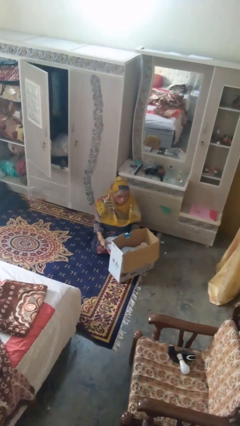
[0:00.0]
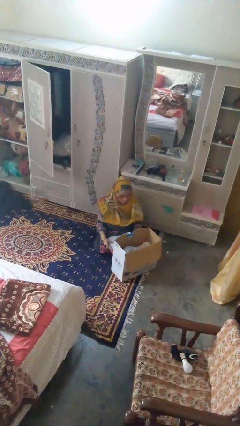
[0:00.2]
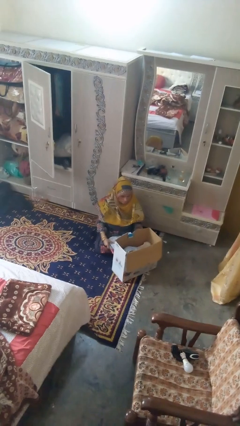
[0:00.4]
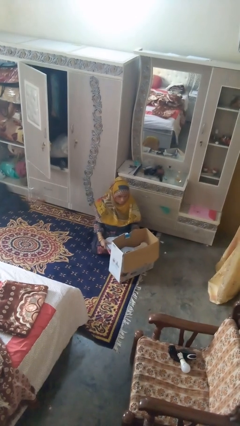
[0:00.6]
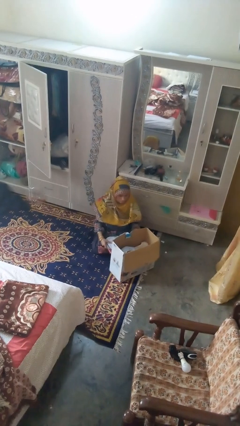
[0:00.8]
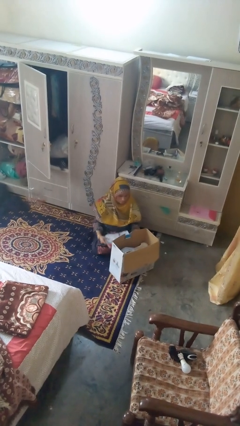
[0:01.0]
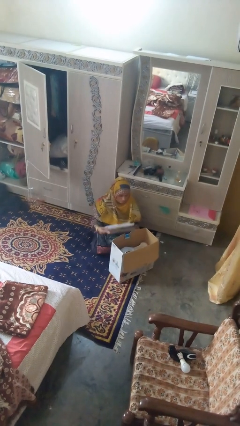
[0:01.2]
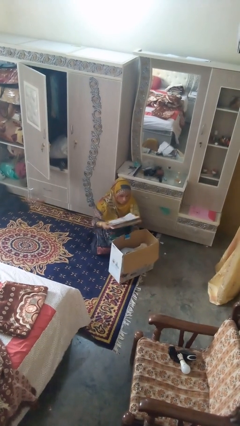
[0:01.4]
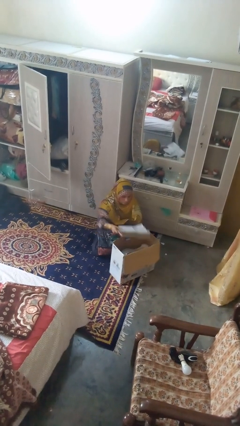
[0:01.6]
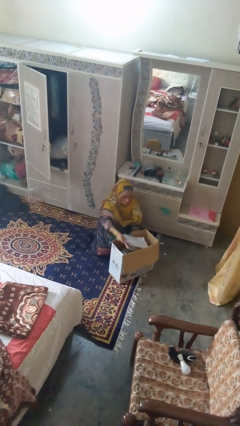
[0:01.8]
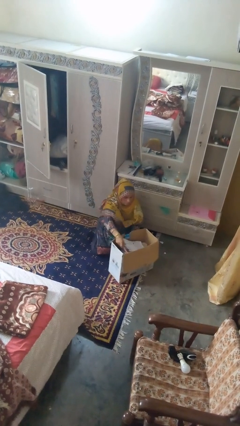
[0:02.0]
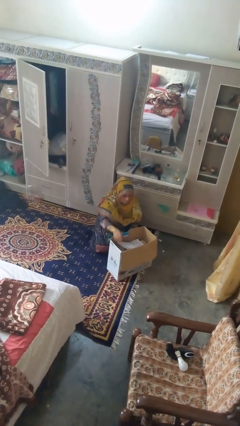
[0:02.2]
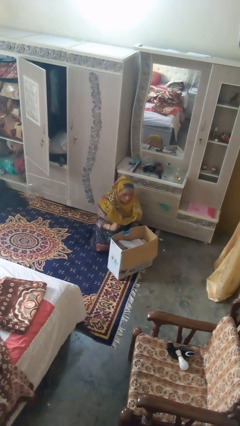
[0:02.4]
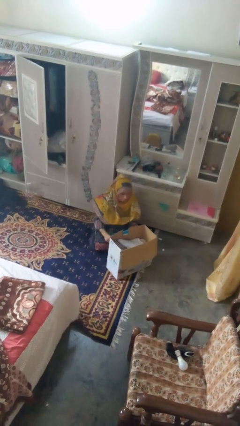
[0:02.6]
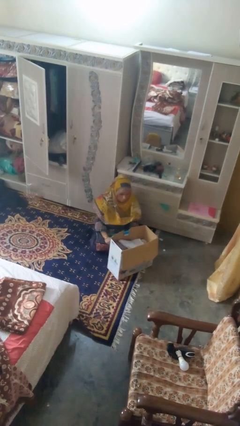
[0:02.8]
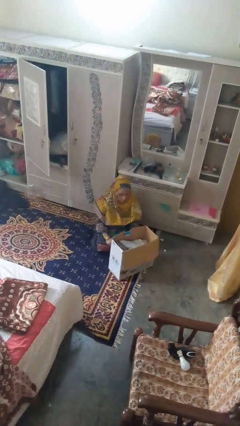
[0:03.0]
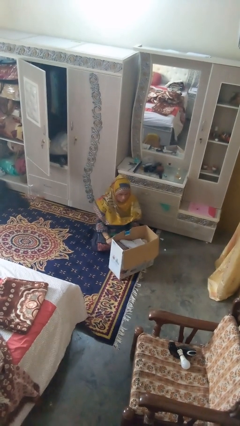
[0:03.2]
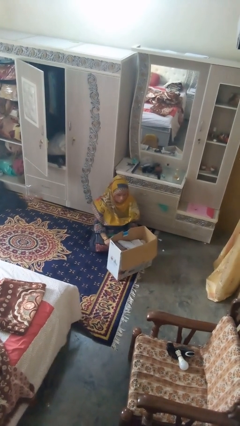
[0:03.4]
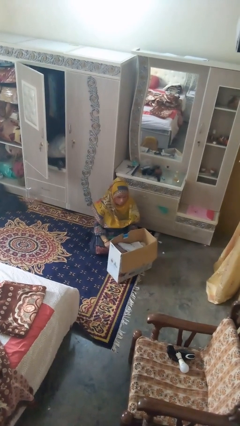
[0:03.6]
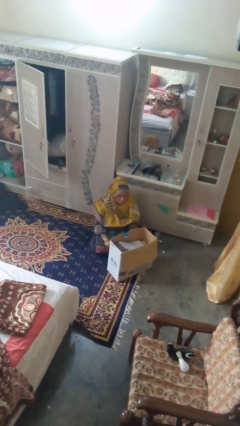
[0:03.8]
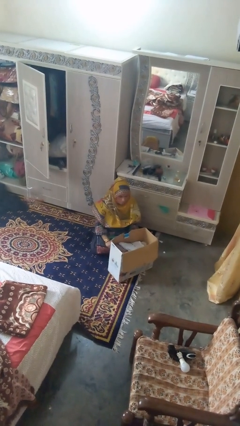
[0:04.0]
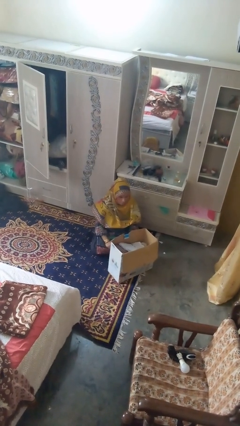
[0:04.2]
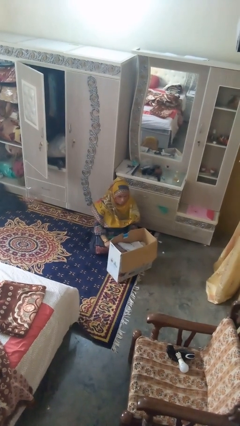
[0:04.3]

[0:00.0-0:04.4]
person puts object into box

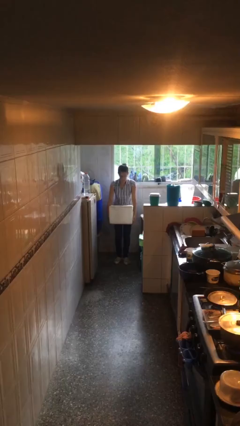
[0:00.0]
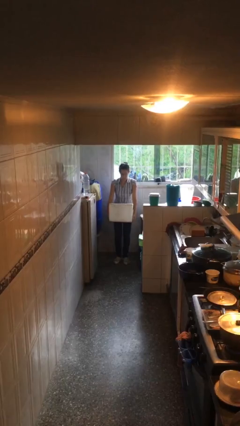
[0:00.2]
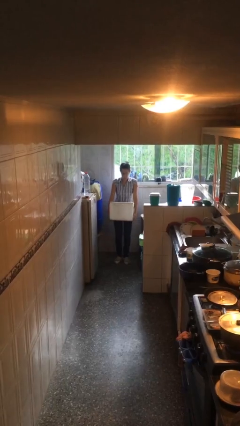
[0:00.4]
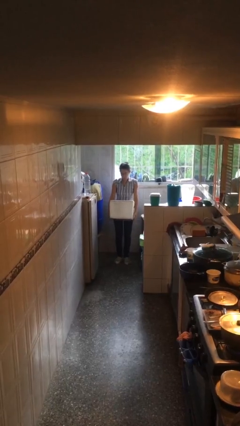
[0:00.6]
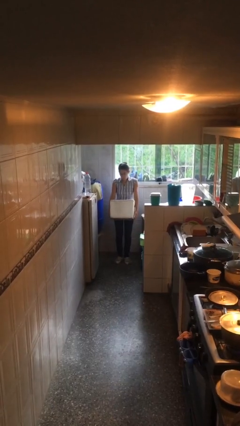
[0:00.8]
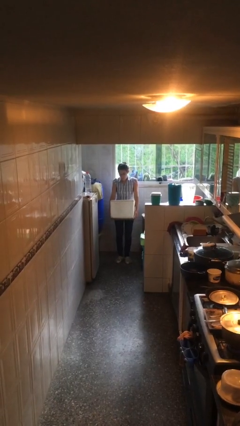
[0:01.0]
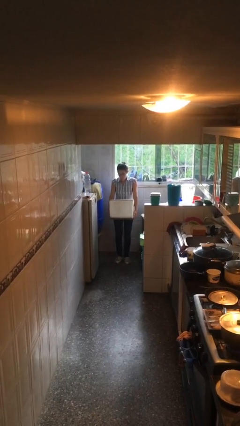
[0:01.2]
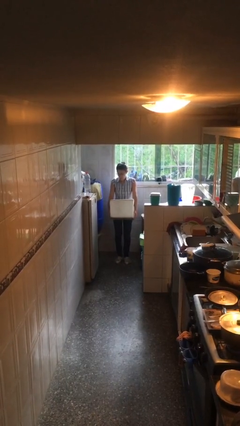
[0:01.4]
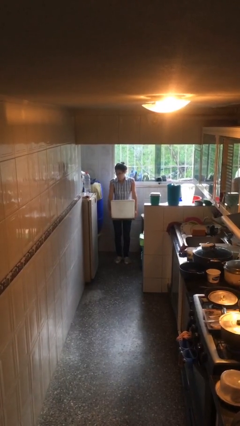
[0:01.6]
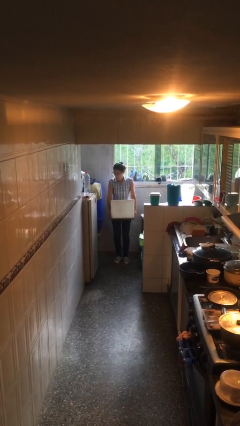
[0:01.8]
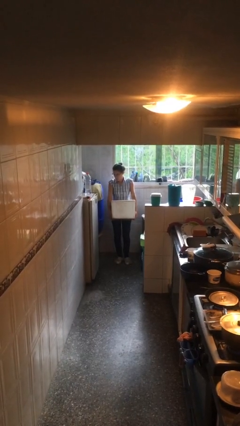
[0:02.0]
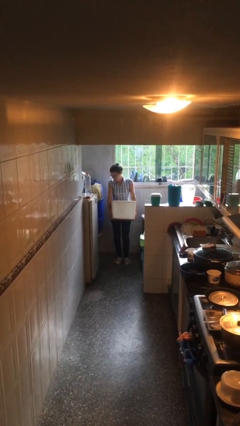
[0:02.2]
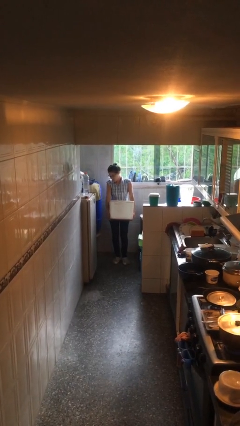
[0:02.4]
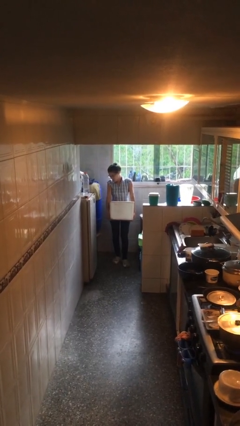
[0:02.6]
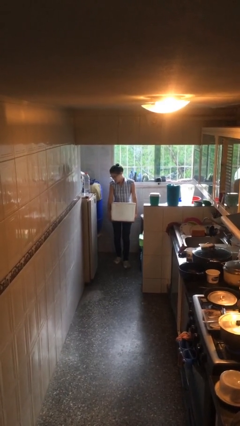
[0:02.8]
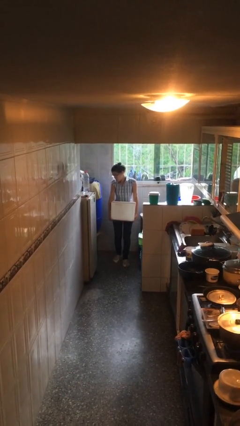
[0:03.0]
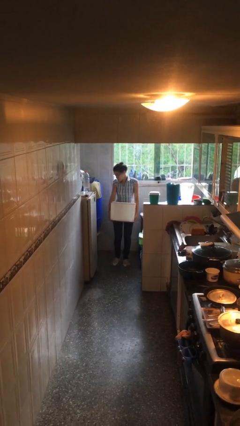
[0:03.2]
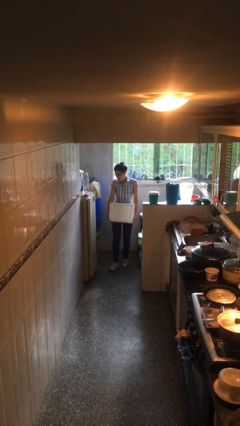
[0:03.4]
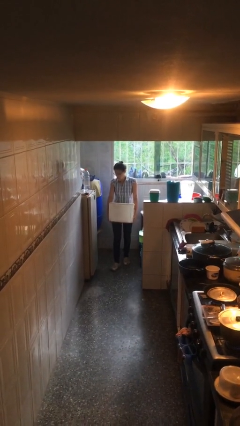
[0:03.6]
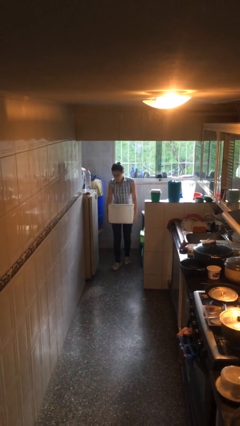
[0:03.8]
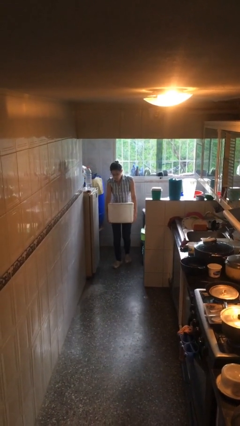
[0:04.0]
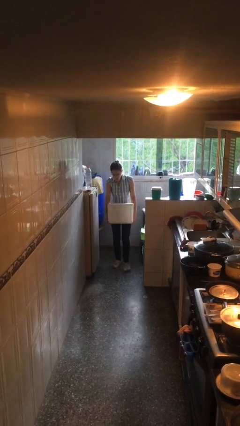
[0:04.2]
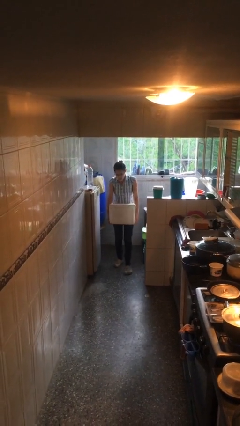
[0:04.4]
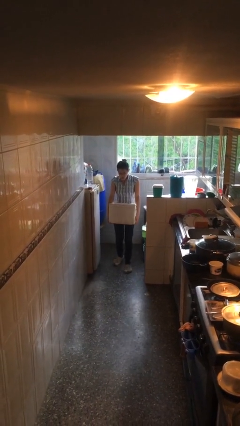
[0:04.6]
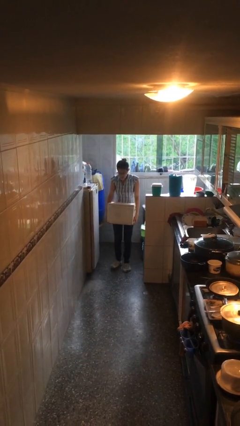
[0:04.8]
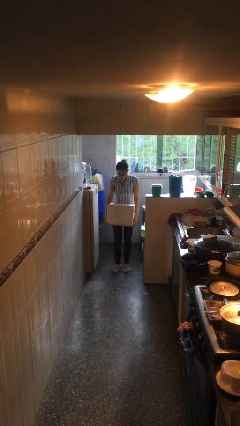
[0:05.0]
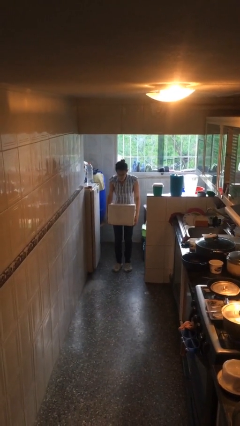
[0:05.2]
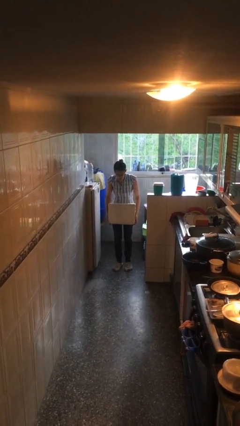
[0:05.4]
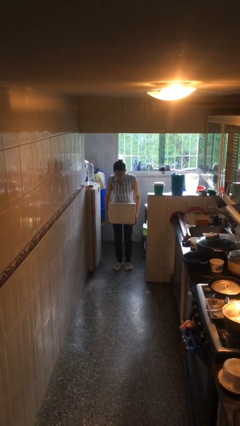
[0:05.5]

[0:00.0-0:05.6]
person carries heavy object

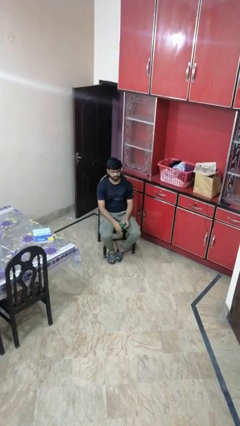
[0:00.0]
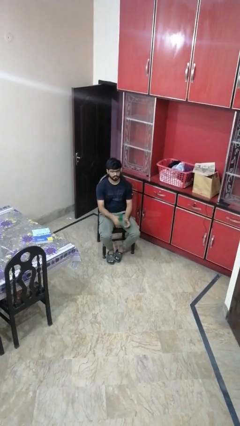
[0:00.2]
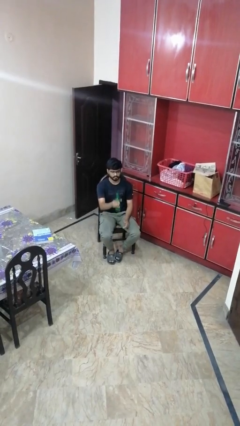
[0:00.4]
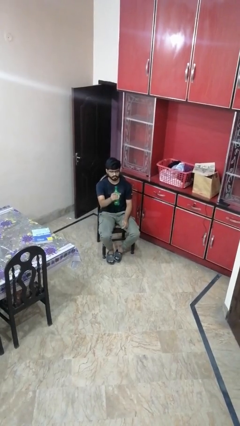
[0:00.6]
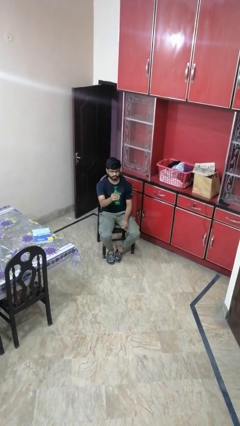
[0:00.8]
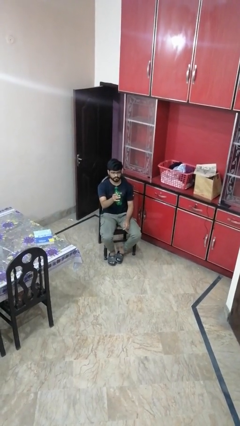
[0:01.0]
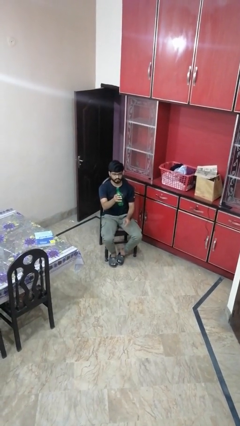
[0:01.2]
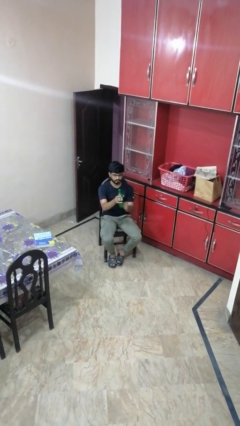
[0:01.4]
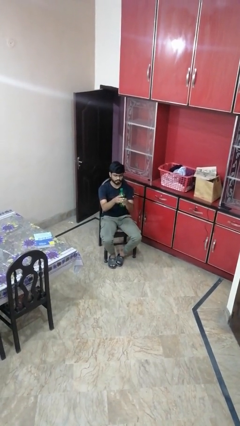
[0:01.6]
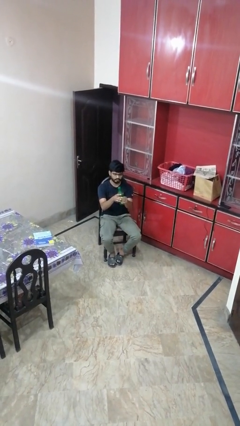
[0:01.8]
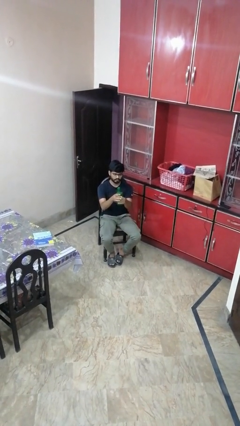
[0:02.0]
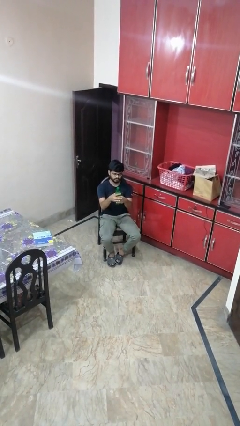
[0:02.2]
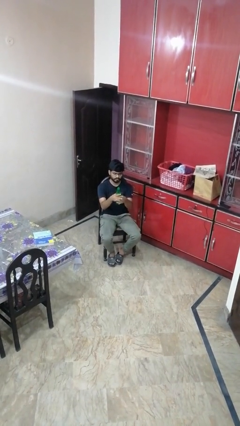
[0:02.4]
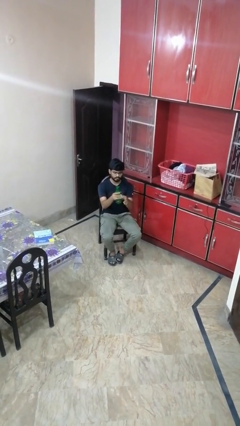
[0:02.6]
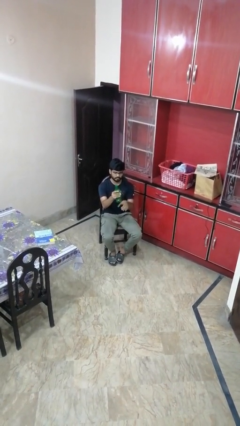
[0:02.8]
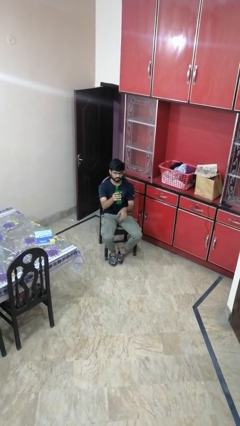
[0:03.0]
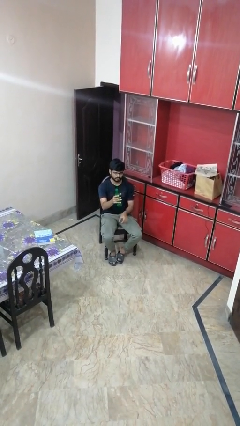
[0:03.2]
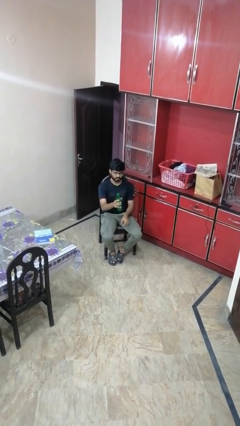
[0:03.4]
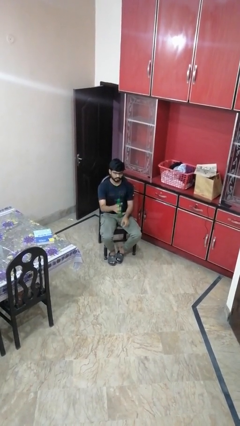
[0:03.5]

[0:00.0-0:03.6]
person squeezes object

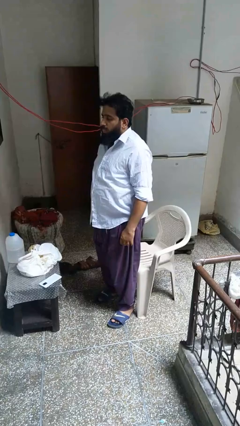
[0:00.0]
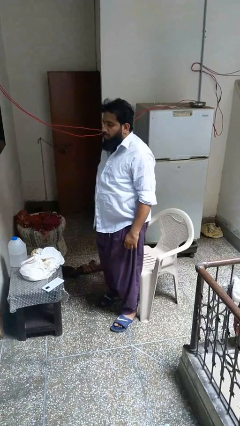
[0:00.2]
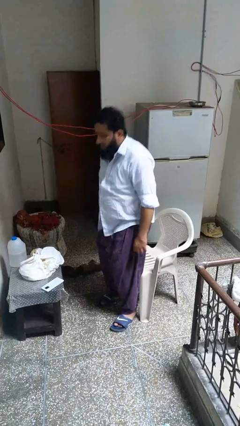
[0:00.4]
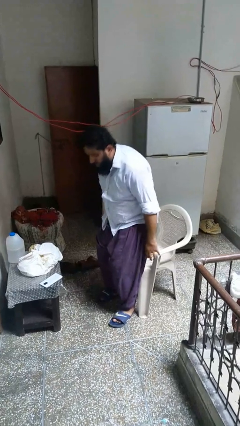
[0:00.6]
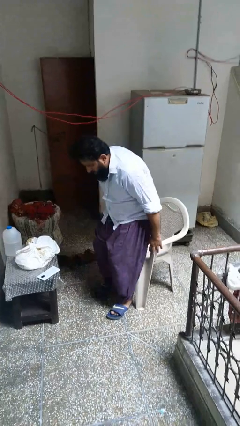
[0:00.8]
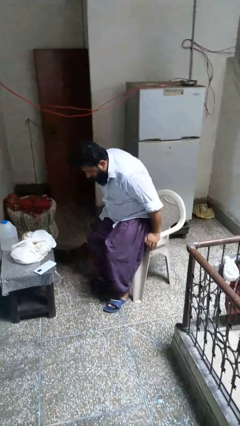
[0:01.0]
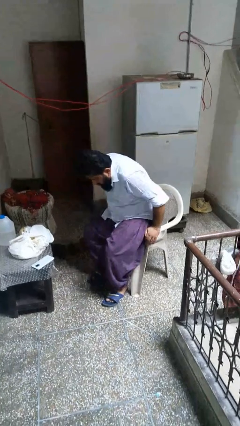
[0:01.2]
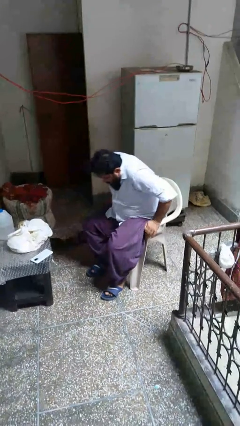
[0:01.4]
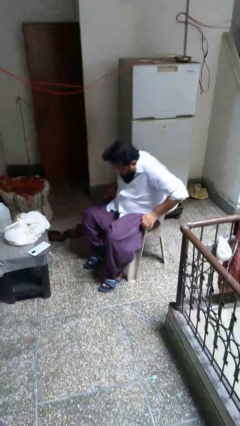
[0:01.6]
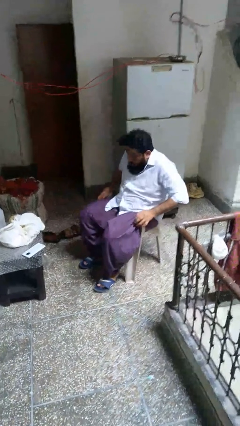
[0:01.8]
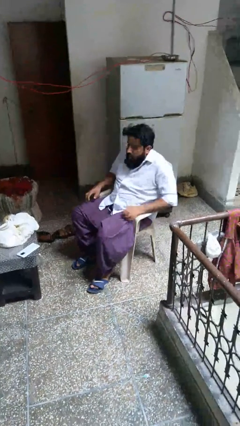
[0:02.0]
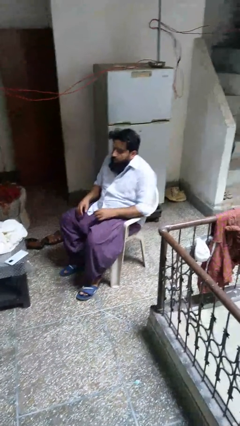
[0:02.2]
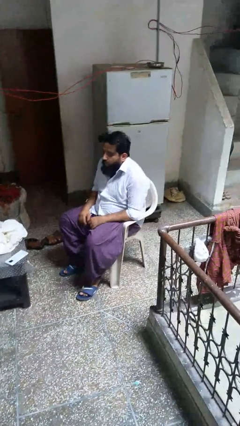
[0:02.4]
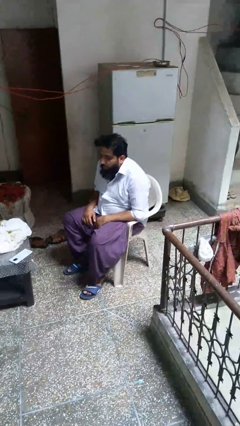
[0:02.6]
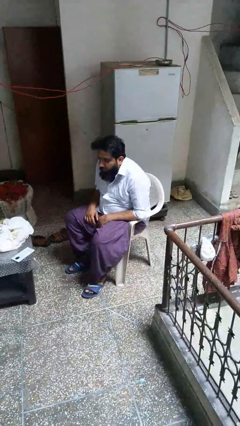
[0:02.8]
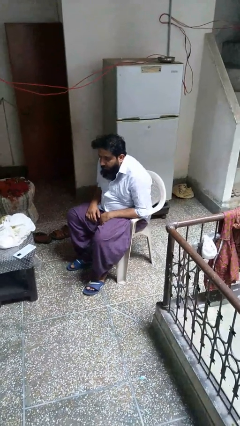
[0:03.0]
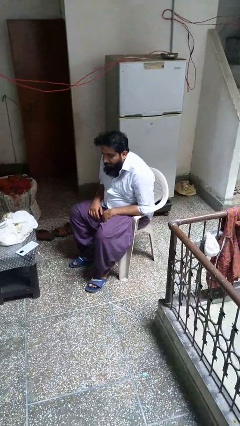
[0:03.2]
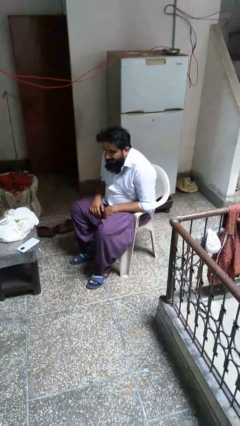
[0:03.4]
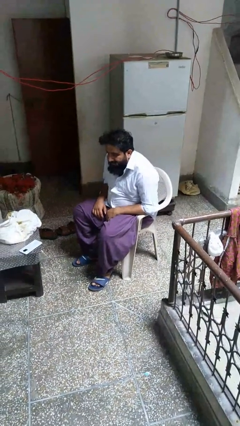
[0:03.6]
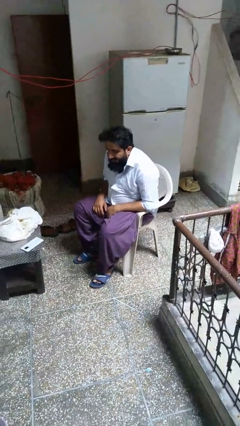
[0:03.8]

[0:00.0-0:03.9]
person sits down

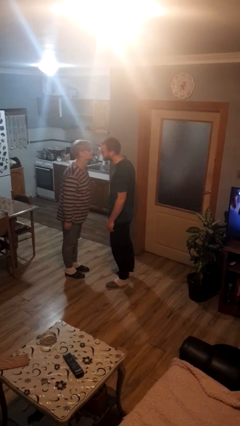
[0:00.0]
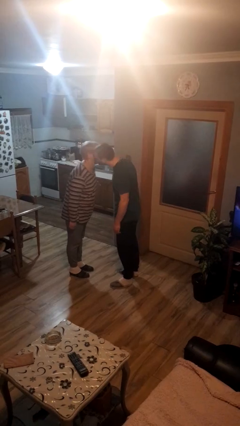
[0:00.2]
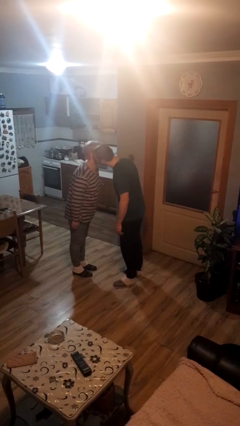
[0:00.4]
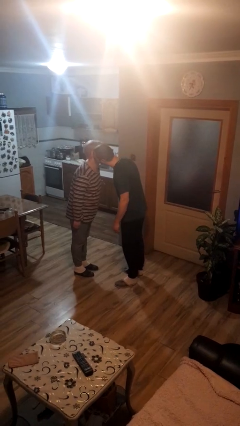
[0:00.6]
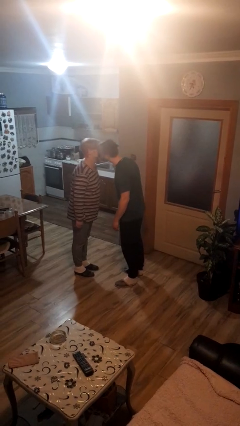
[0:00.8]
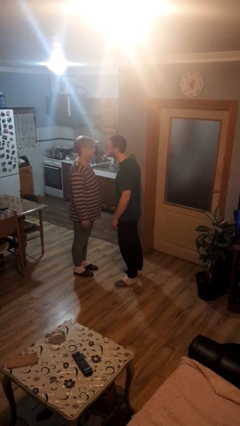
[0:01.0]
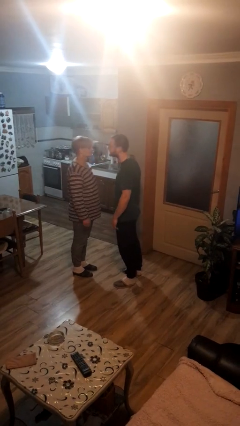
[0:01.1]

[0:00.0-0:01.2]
person kisses cheek of person
